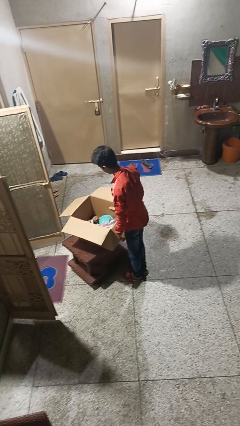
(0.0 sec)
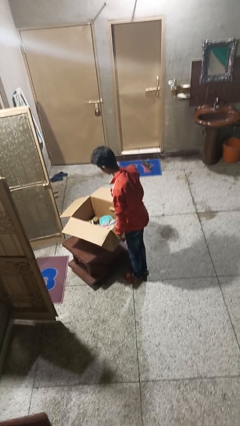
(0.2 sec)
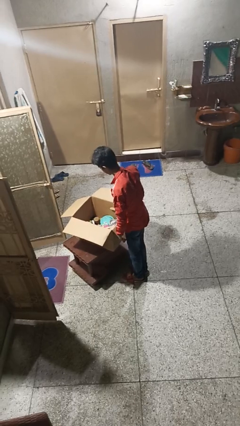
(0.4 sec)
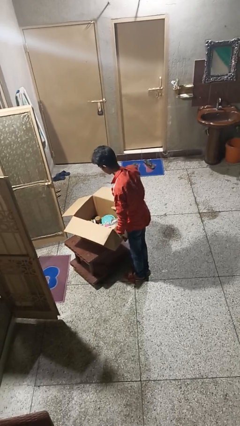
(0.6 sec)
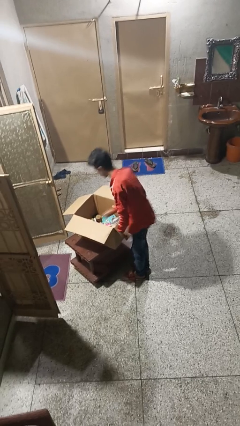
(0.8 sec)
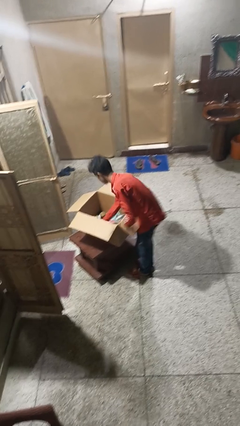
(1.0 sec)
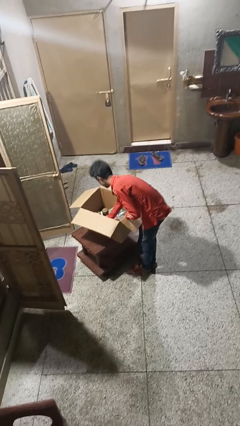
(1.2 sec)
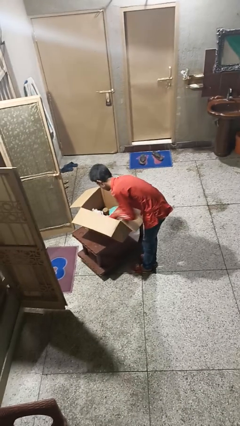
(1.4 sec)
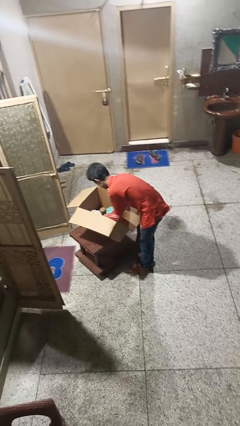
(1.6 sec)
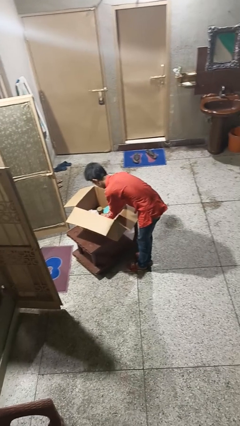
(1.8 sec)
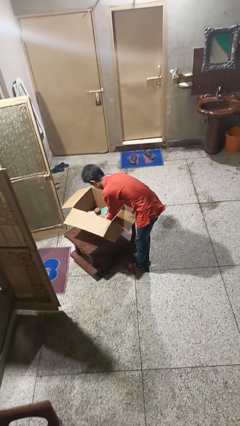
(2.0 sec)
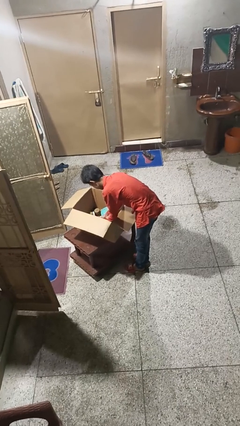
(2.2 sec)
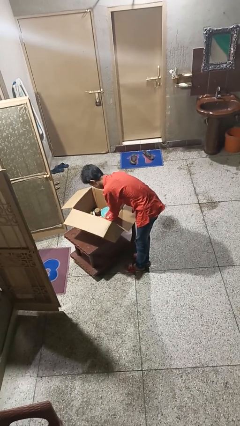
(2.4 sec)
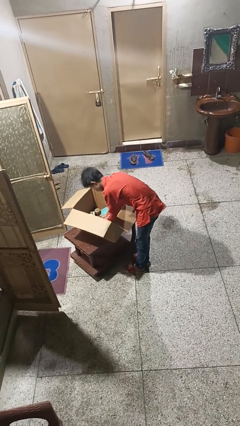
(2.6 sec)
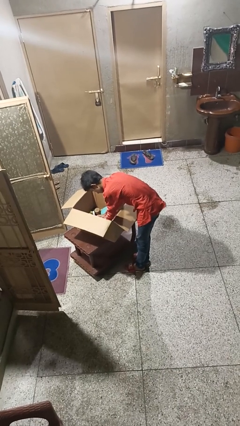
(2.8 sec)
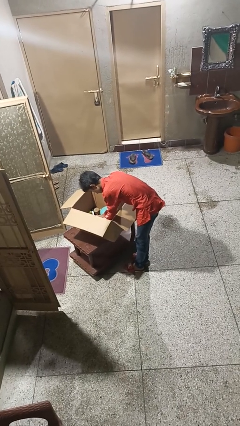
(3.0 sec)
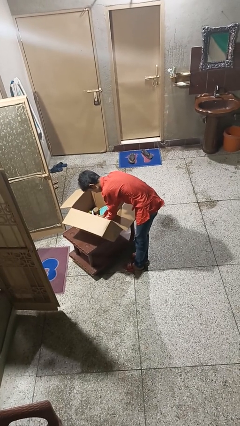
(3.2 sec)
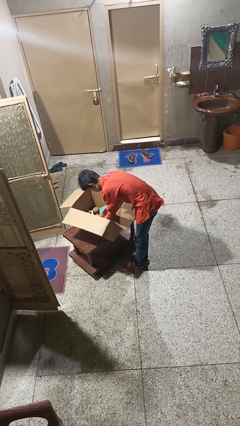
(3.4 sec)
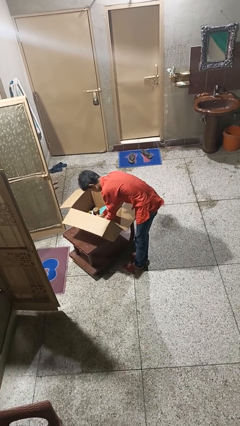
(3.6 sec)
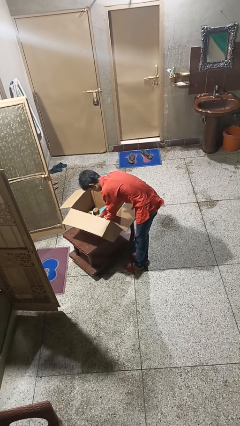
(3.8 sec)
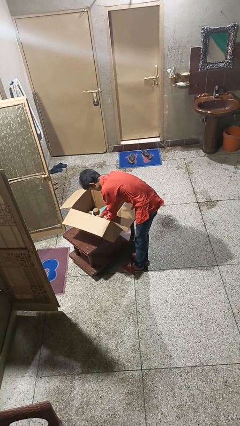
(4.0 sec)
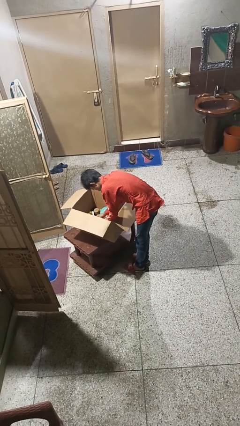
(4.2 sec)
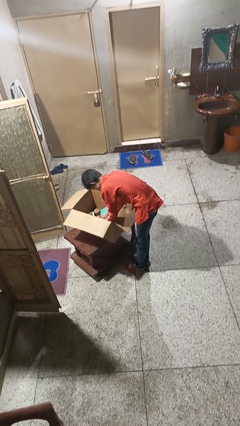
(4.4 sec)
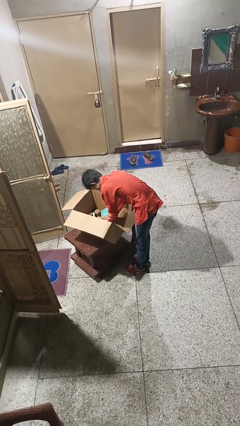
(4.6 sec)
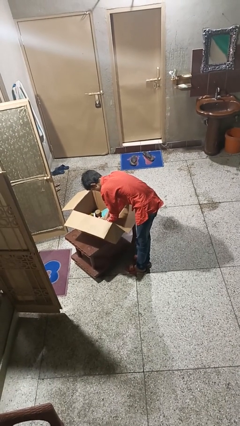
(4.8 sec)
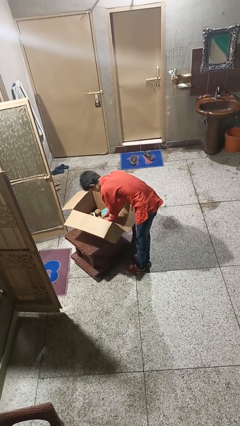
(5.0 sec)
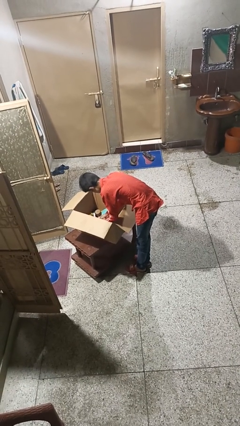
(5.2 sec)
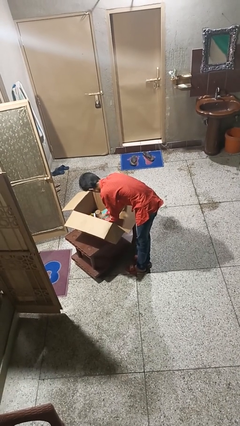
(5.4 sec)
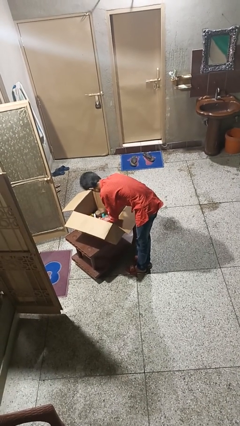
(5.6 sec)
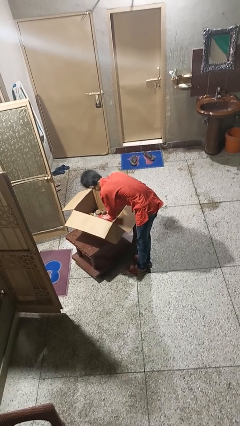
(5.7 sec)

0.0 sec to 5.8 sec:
person searches in box

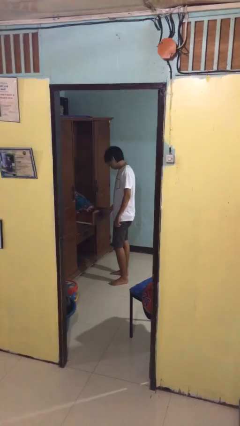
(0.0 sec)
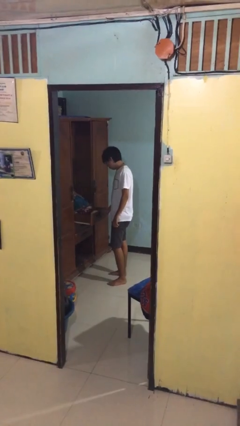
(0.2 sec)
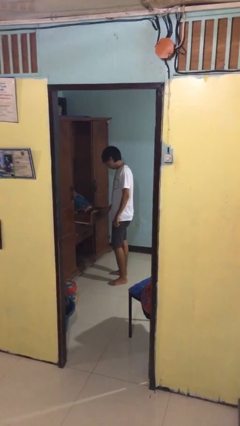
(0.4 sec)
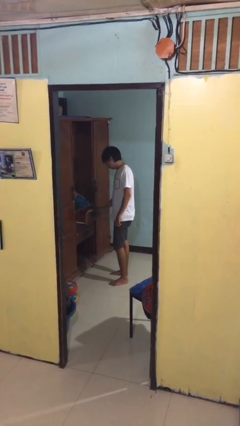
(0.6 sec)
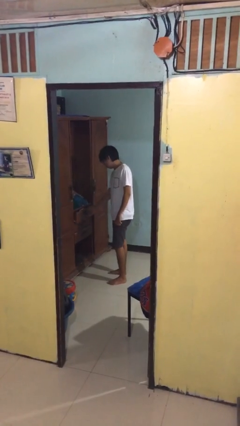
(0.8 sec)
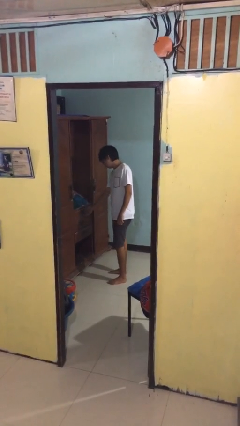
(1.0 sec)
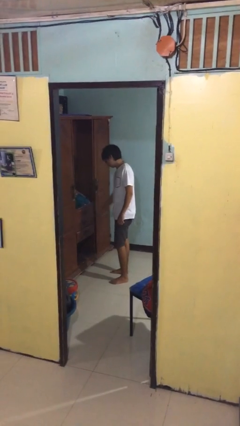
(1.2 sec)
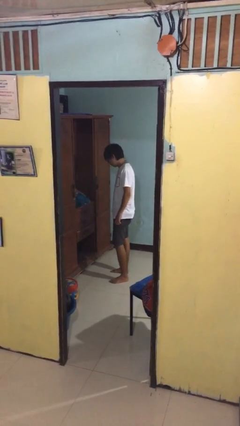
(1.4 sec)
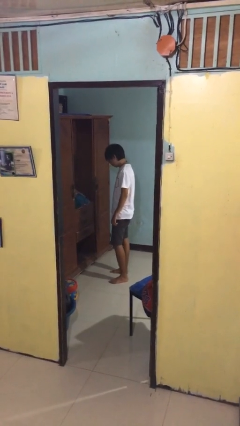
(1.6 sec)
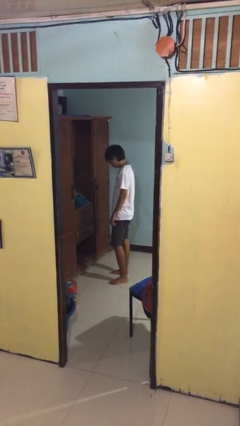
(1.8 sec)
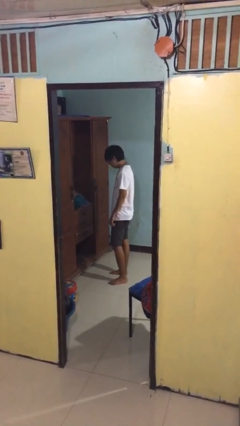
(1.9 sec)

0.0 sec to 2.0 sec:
person closes dresser drawer

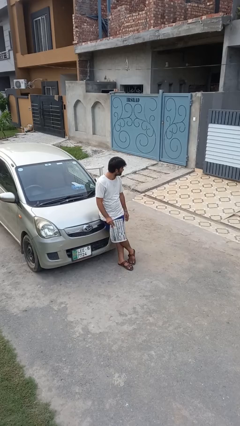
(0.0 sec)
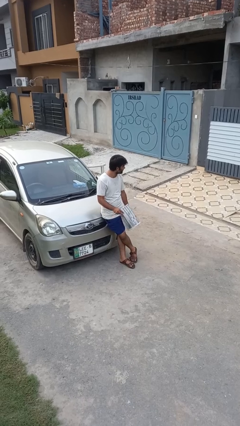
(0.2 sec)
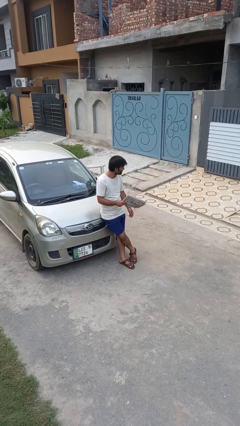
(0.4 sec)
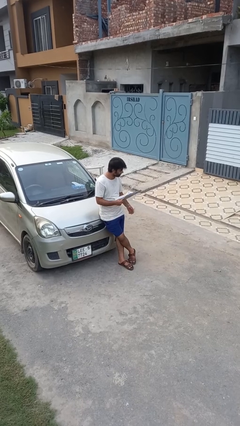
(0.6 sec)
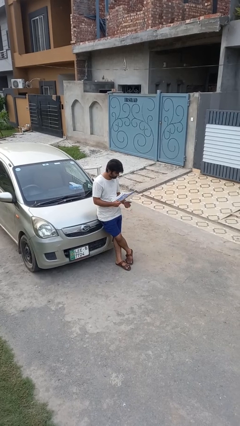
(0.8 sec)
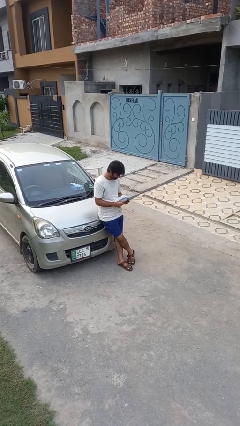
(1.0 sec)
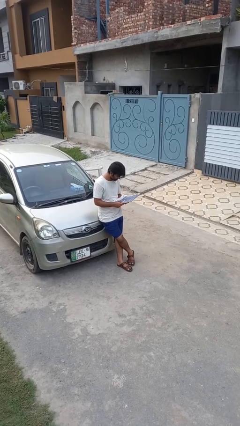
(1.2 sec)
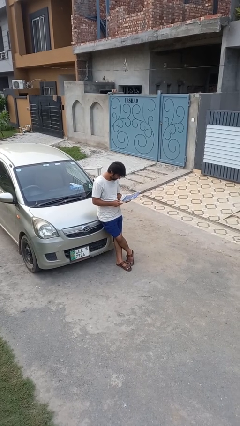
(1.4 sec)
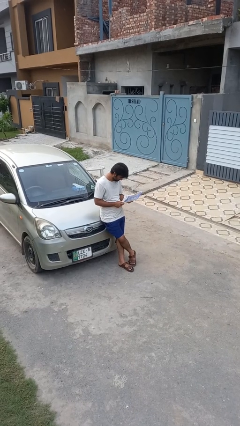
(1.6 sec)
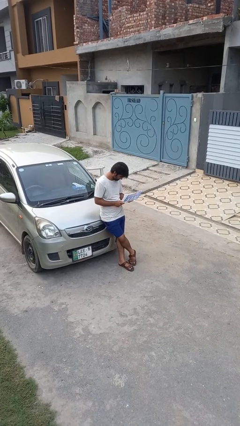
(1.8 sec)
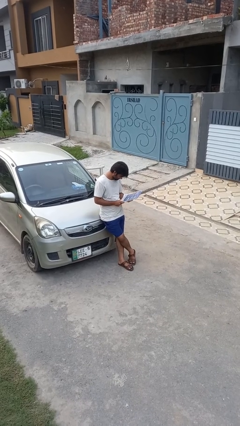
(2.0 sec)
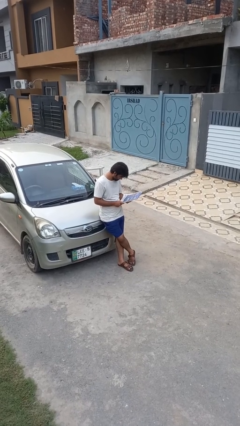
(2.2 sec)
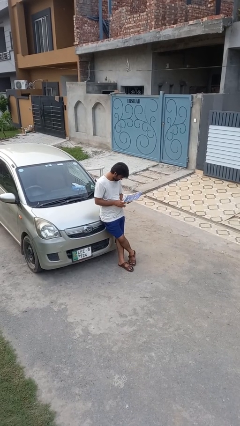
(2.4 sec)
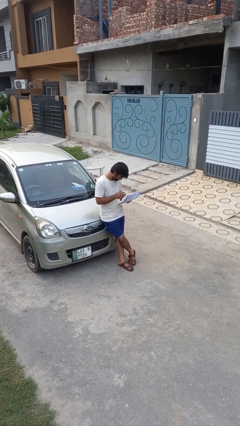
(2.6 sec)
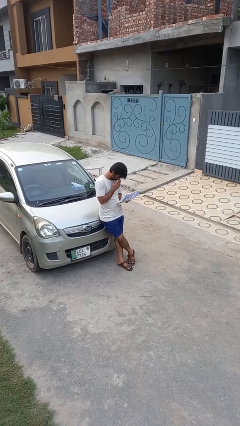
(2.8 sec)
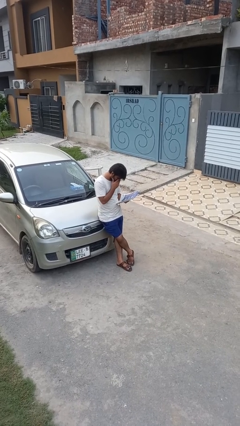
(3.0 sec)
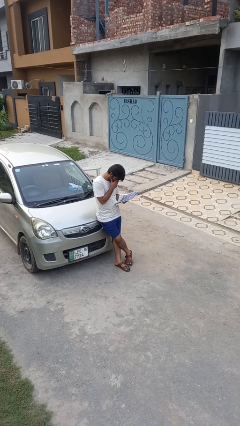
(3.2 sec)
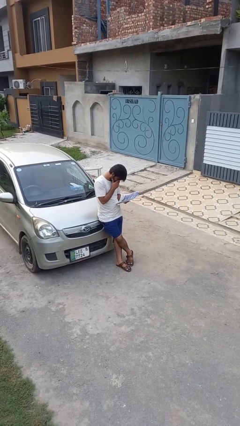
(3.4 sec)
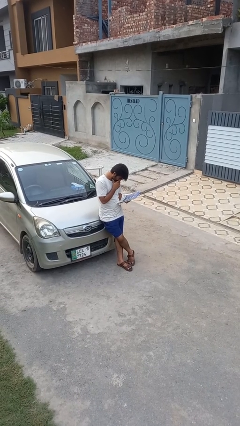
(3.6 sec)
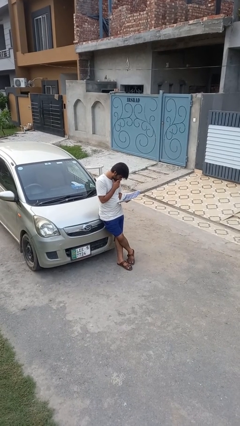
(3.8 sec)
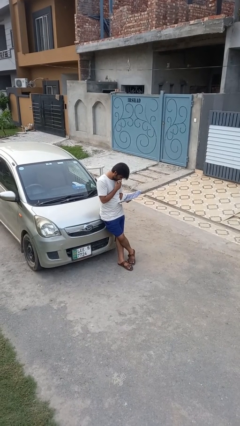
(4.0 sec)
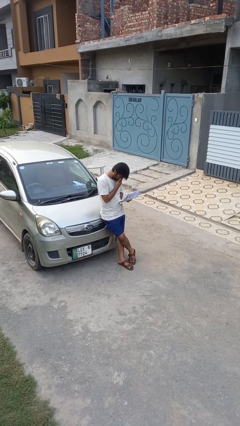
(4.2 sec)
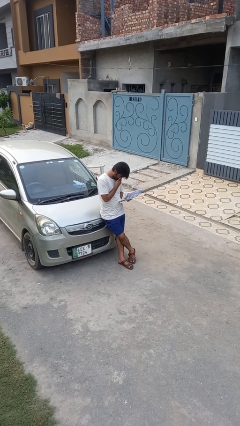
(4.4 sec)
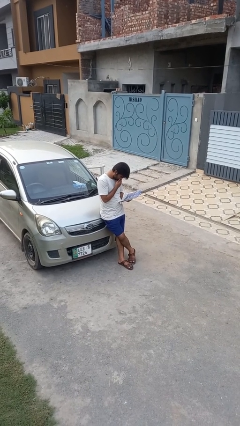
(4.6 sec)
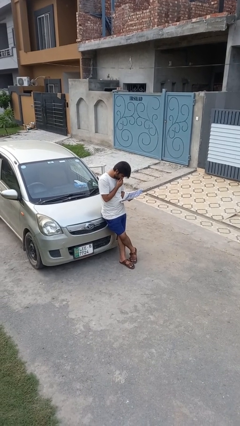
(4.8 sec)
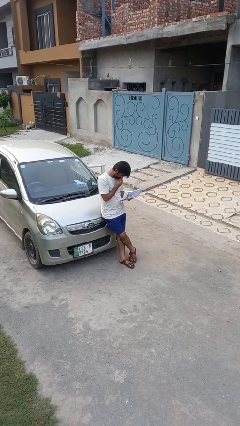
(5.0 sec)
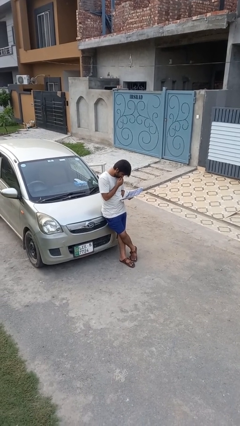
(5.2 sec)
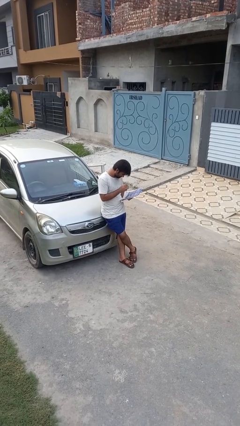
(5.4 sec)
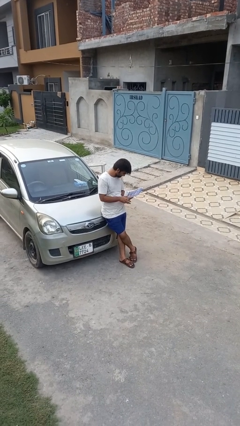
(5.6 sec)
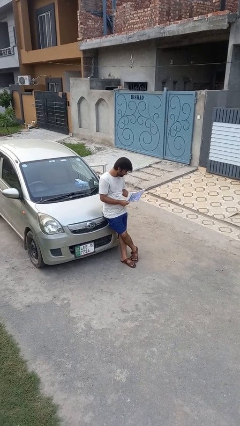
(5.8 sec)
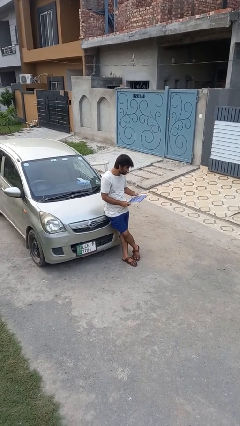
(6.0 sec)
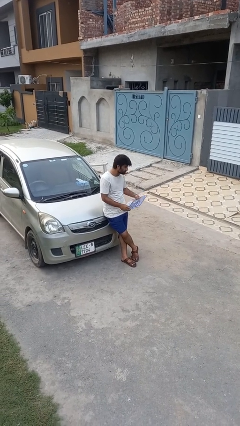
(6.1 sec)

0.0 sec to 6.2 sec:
person reads newspaper

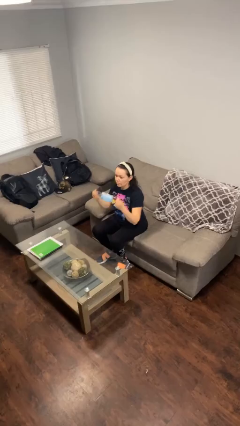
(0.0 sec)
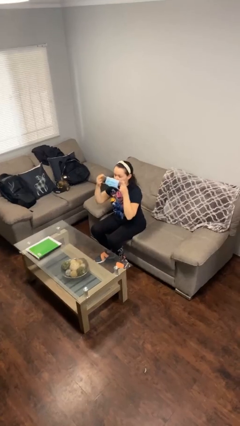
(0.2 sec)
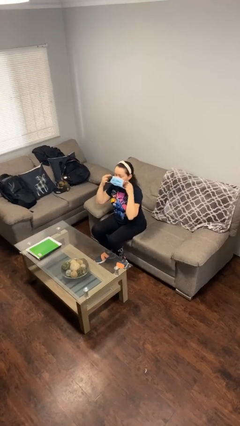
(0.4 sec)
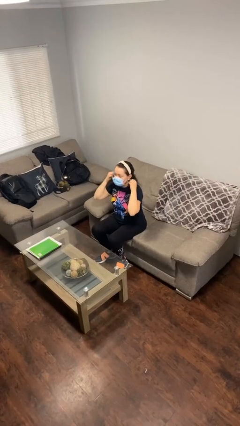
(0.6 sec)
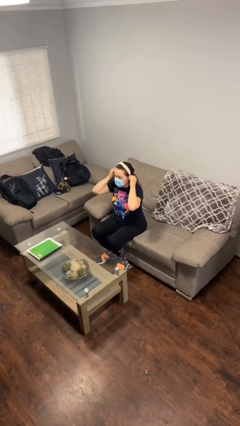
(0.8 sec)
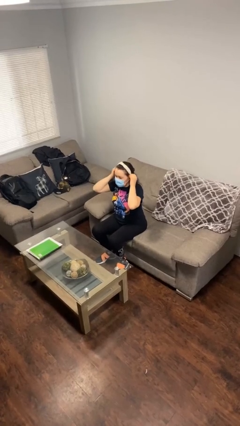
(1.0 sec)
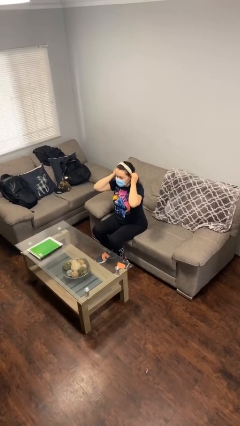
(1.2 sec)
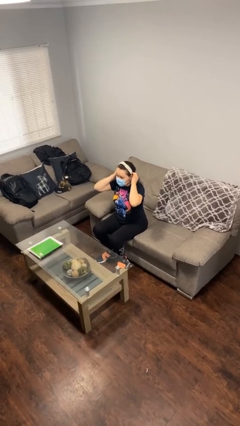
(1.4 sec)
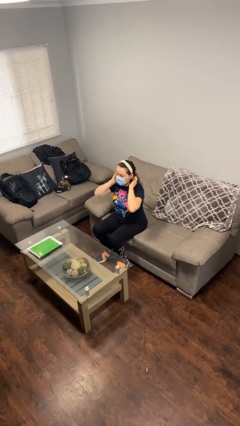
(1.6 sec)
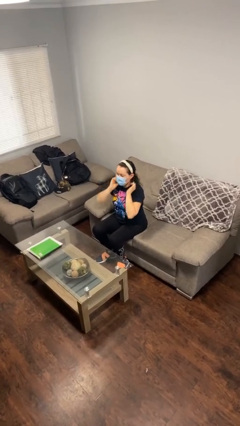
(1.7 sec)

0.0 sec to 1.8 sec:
person puts on facemask

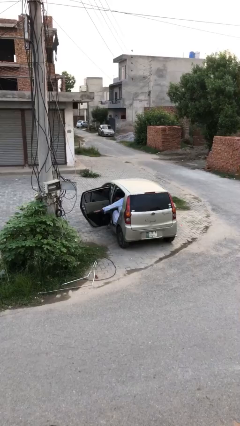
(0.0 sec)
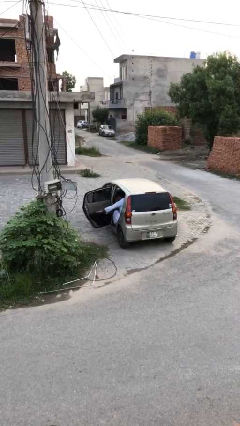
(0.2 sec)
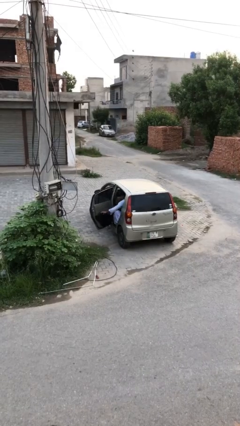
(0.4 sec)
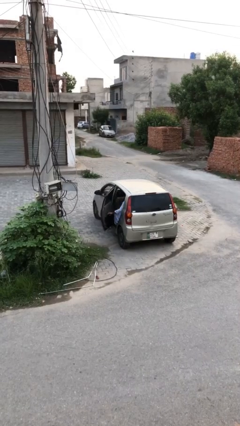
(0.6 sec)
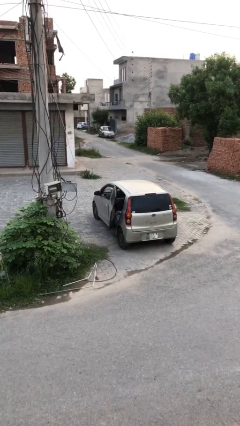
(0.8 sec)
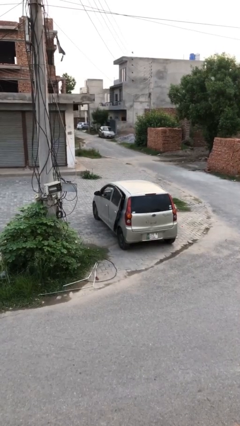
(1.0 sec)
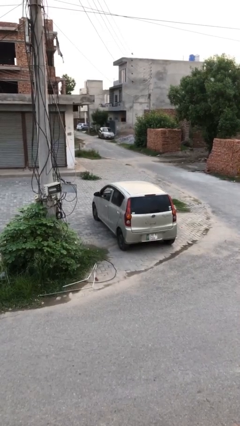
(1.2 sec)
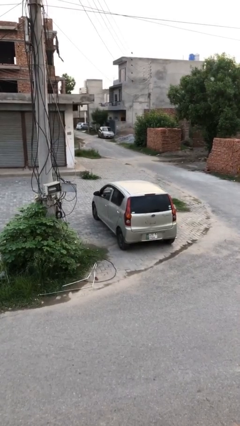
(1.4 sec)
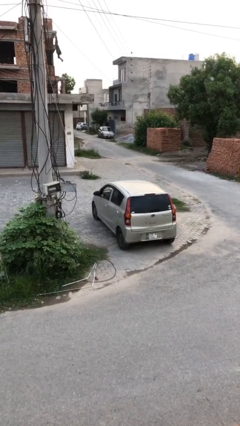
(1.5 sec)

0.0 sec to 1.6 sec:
person closes car door
